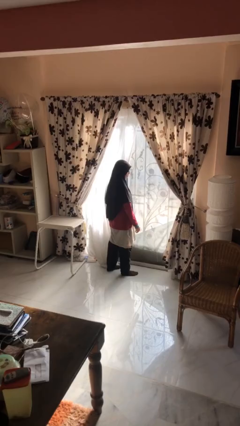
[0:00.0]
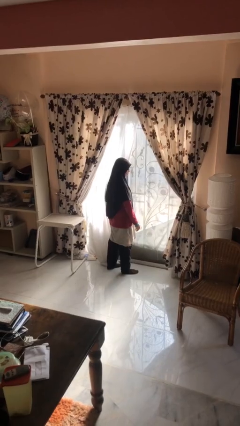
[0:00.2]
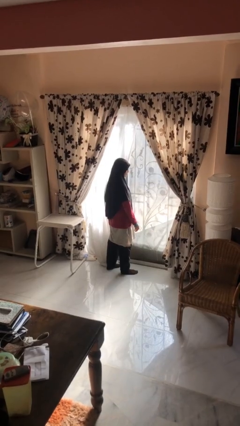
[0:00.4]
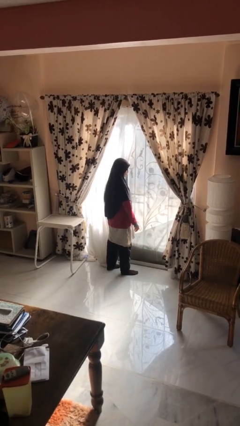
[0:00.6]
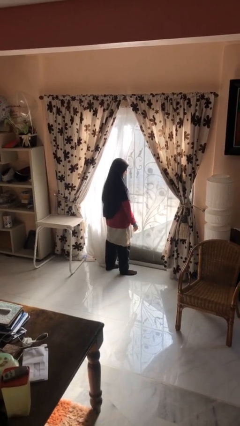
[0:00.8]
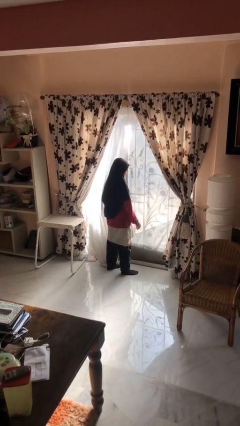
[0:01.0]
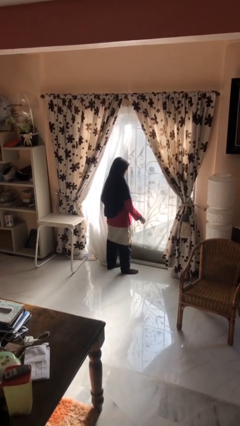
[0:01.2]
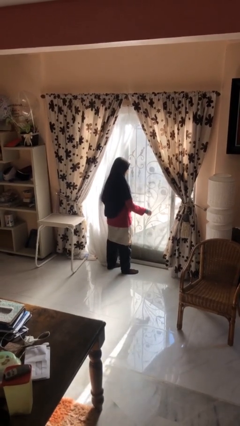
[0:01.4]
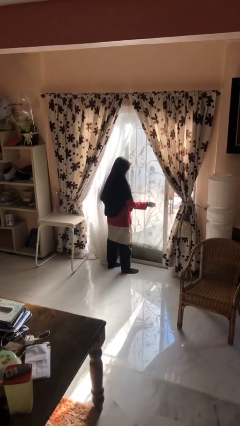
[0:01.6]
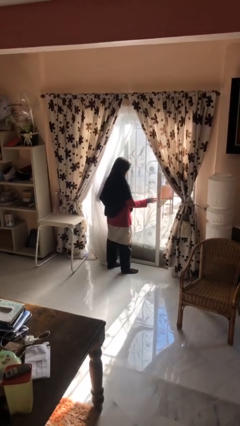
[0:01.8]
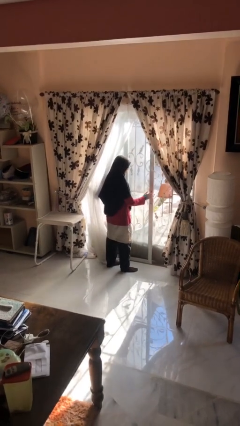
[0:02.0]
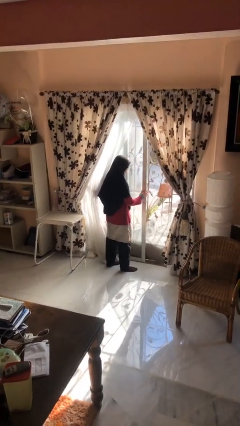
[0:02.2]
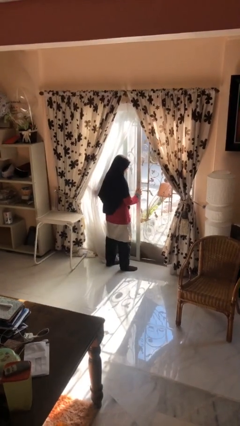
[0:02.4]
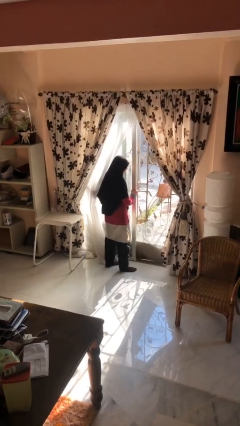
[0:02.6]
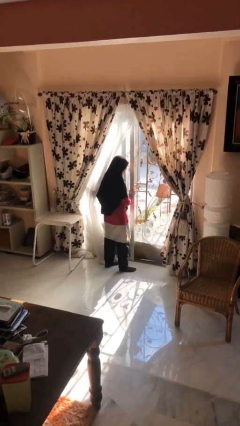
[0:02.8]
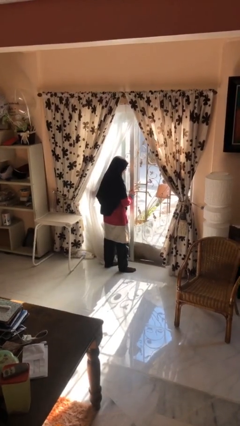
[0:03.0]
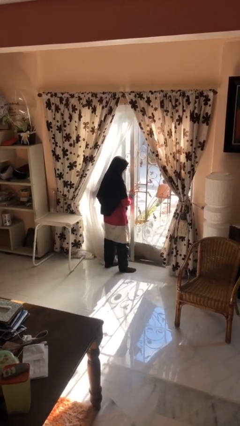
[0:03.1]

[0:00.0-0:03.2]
person opens sliding door

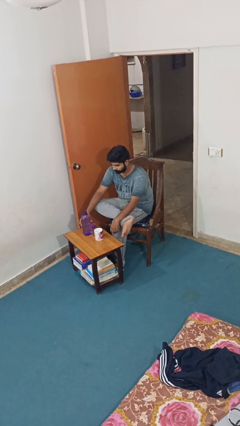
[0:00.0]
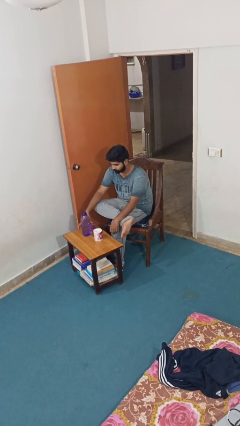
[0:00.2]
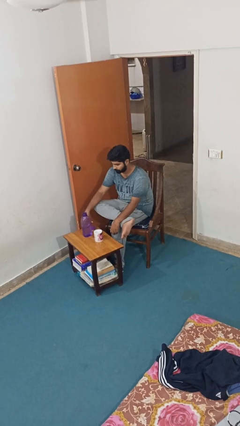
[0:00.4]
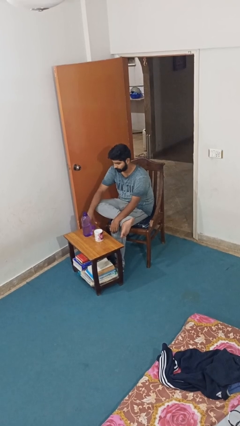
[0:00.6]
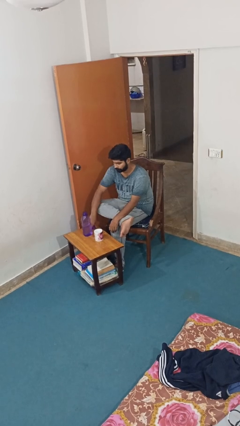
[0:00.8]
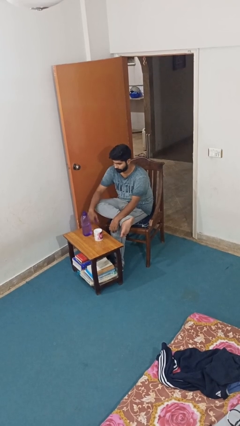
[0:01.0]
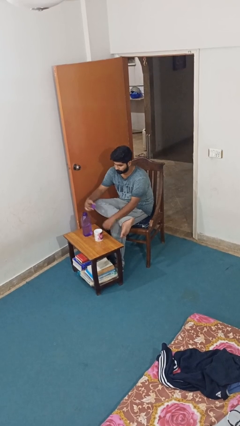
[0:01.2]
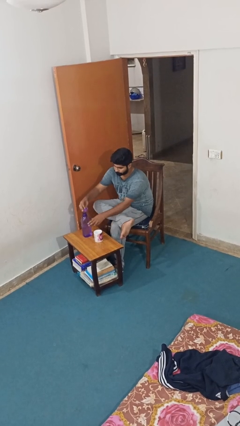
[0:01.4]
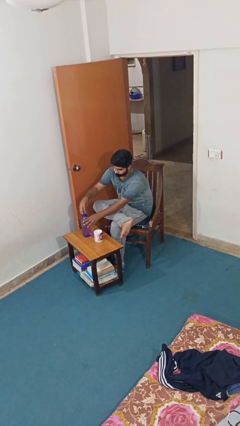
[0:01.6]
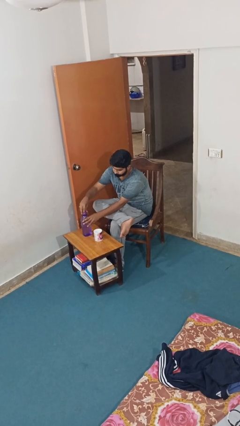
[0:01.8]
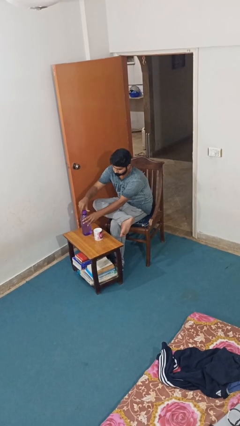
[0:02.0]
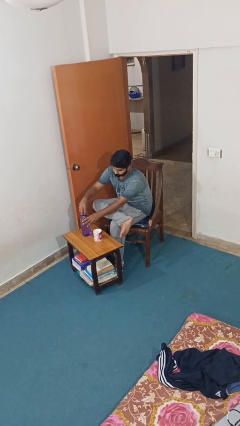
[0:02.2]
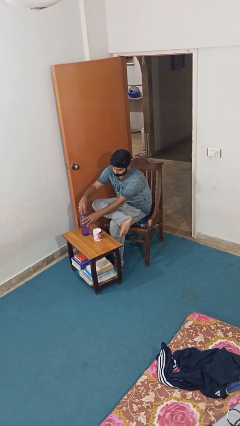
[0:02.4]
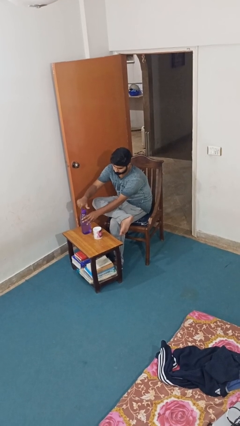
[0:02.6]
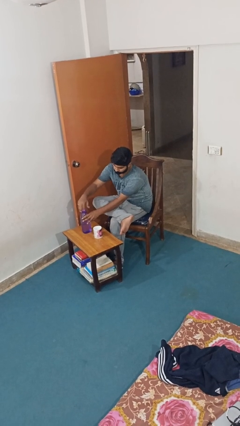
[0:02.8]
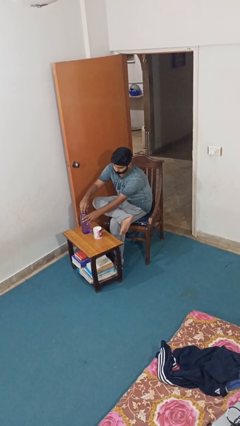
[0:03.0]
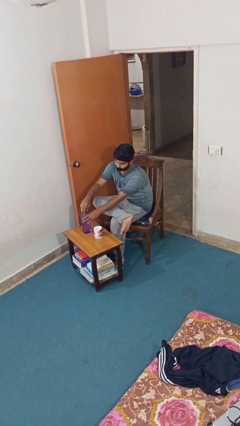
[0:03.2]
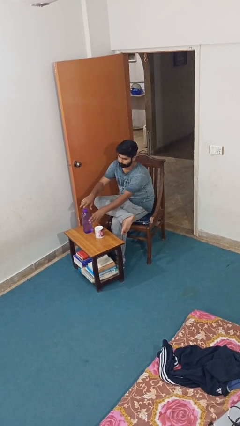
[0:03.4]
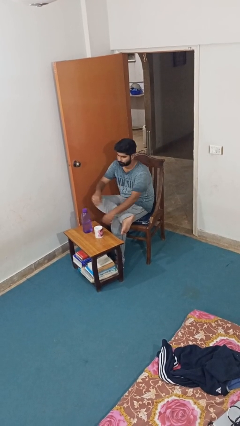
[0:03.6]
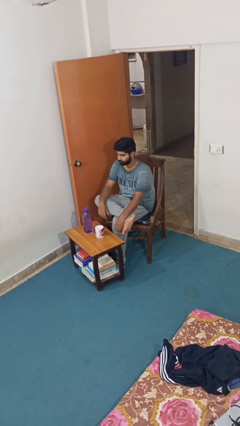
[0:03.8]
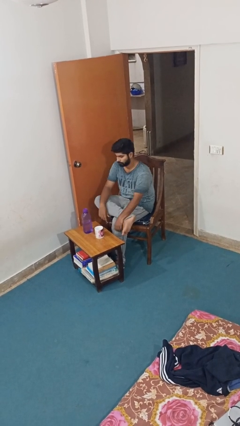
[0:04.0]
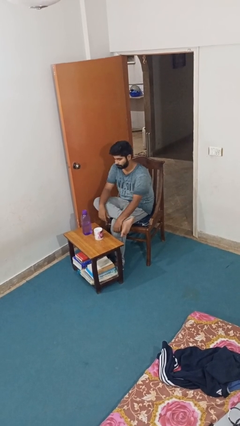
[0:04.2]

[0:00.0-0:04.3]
person screws lid to bottle

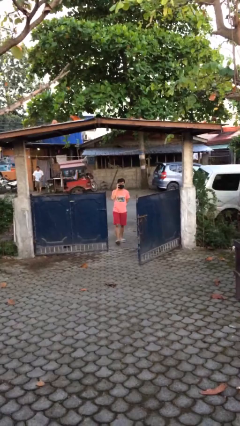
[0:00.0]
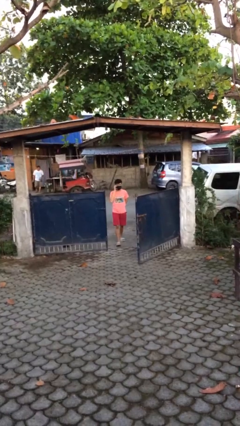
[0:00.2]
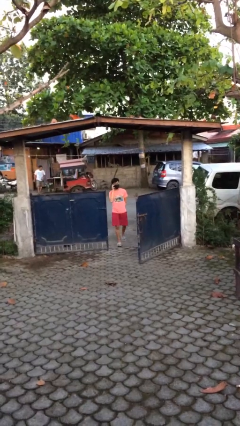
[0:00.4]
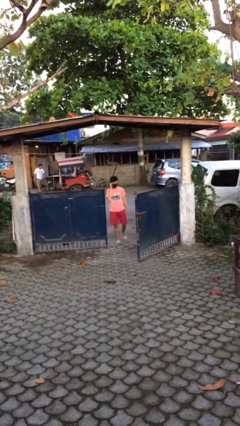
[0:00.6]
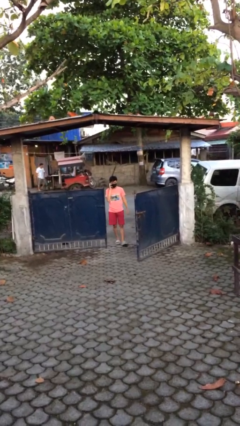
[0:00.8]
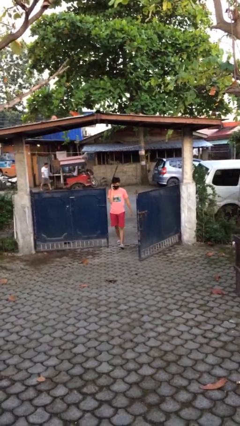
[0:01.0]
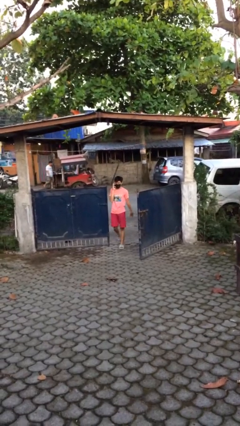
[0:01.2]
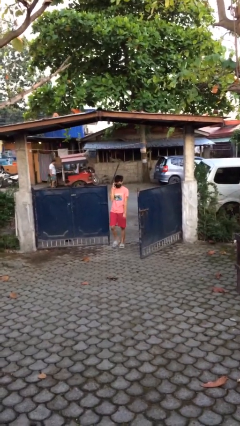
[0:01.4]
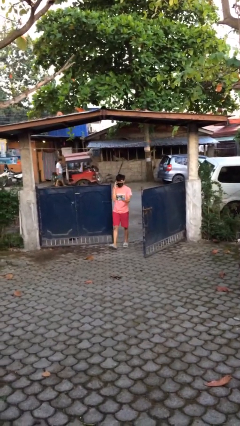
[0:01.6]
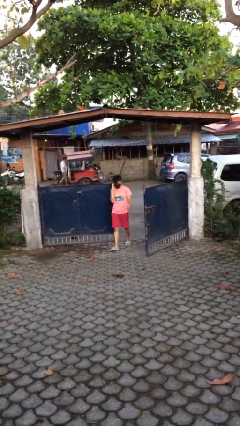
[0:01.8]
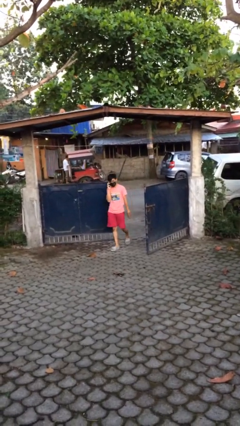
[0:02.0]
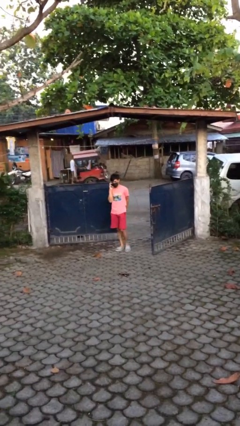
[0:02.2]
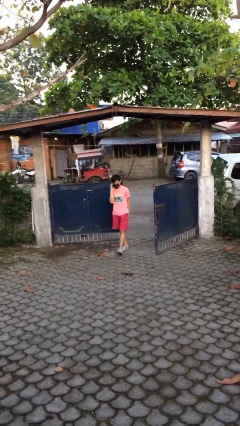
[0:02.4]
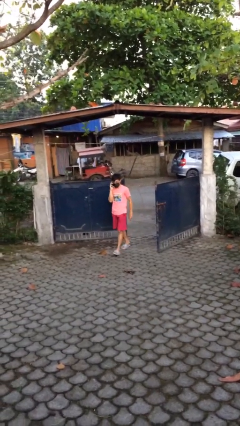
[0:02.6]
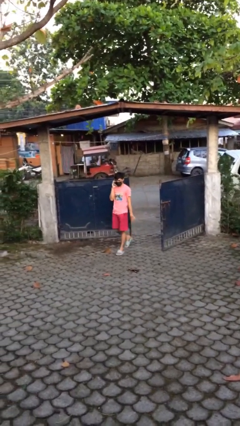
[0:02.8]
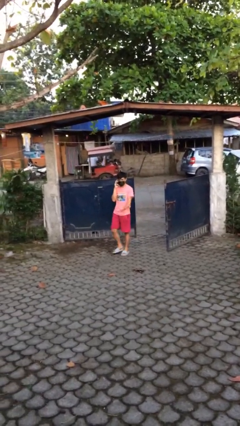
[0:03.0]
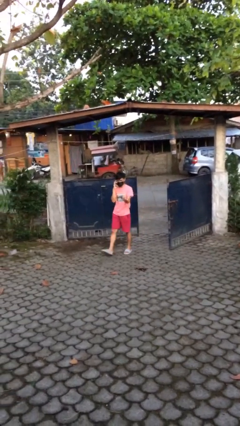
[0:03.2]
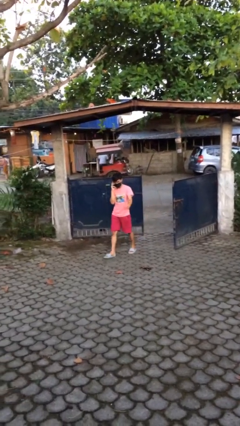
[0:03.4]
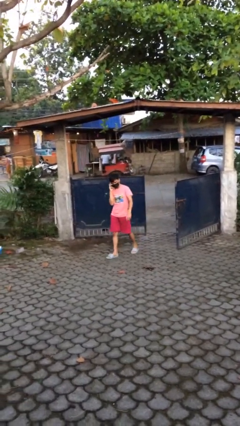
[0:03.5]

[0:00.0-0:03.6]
person enters scene through structure

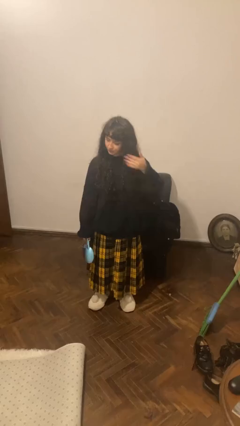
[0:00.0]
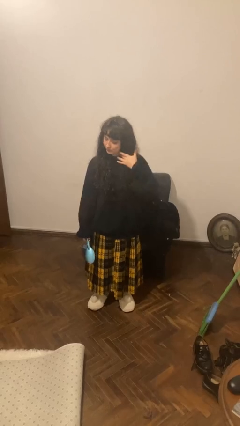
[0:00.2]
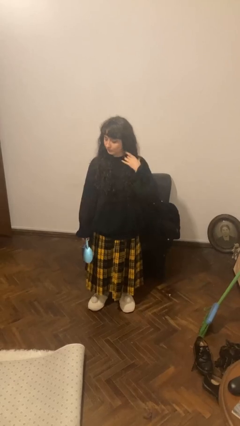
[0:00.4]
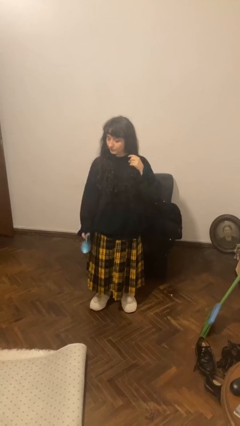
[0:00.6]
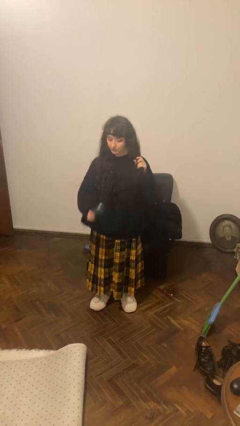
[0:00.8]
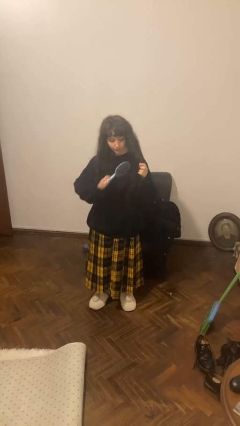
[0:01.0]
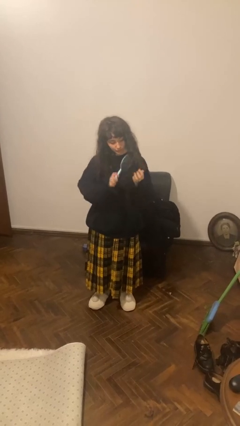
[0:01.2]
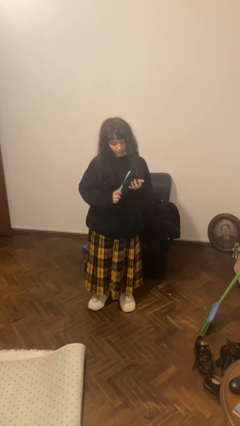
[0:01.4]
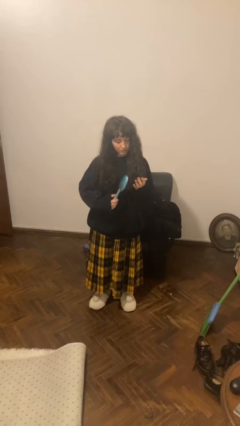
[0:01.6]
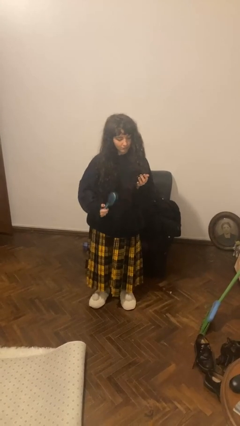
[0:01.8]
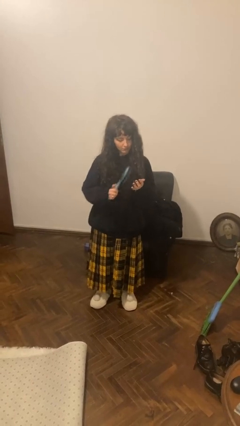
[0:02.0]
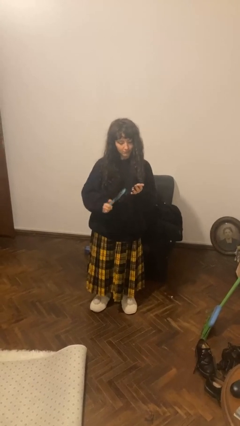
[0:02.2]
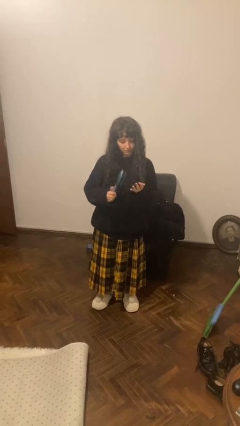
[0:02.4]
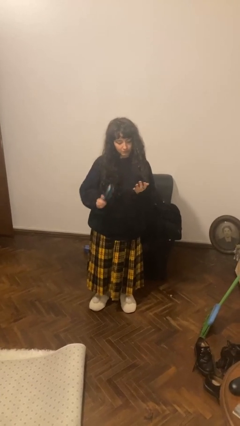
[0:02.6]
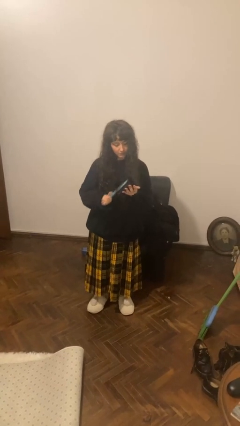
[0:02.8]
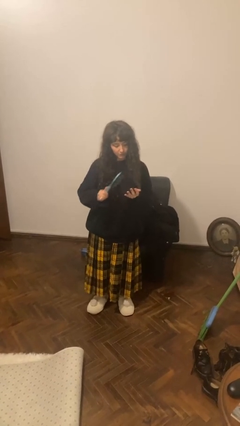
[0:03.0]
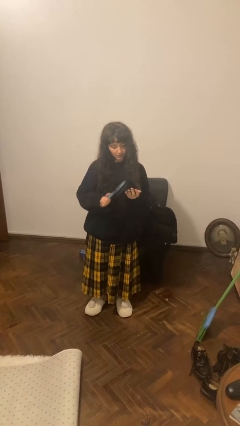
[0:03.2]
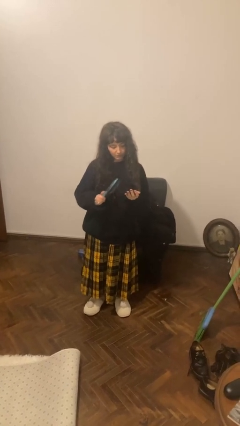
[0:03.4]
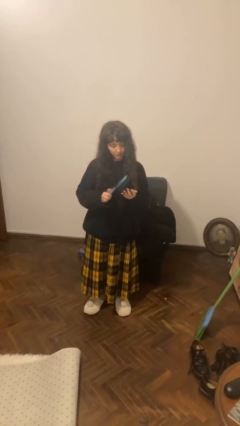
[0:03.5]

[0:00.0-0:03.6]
person brushes hair

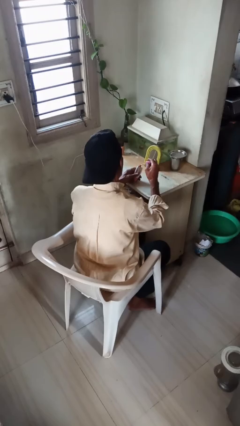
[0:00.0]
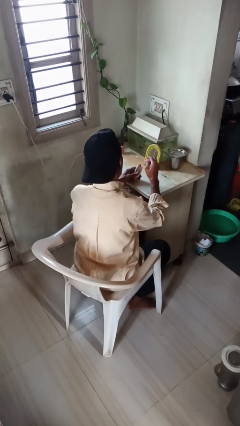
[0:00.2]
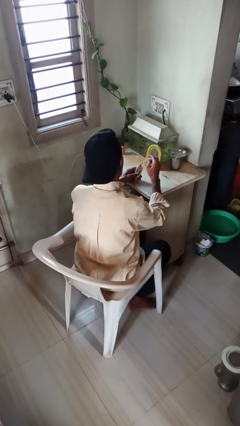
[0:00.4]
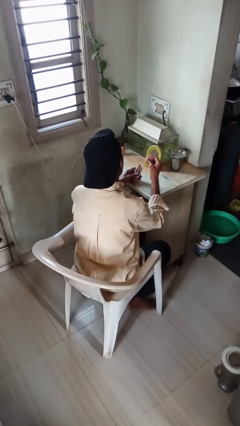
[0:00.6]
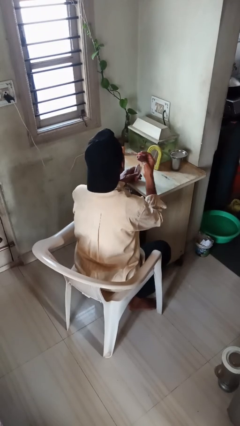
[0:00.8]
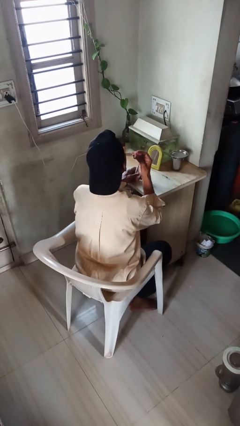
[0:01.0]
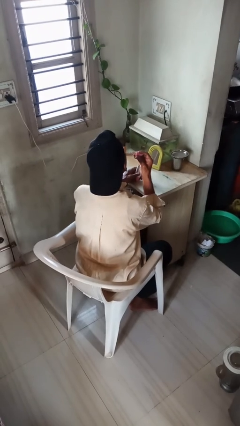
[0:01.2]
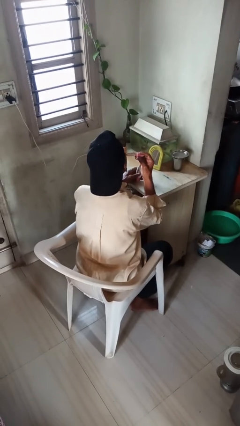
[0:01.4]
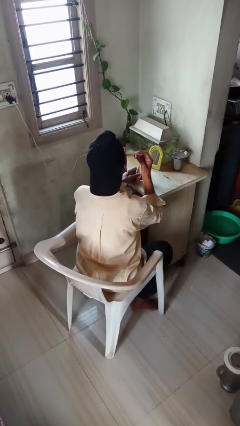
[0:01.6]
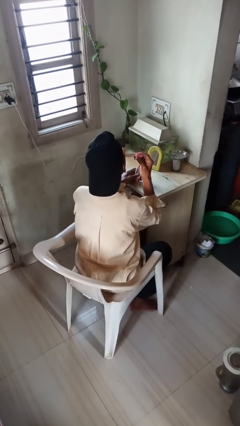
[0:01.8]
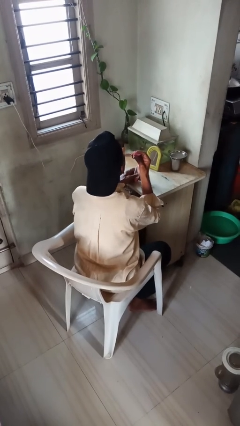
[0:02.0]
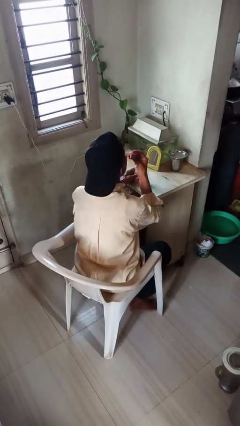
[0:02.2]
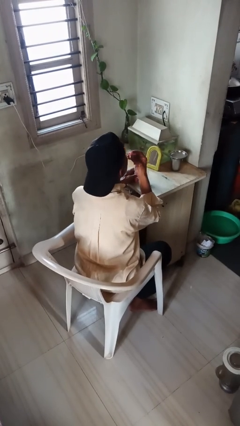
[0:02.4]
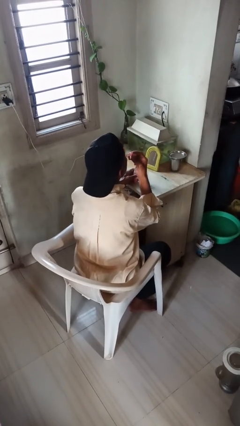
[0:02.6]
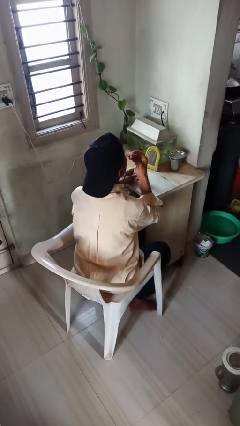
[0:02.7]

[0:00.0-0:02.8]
person applies lip makeup

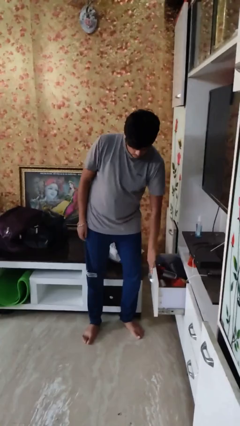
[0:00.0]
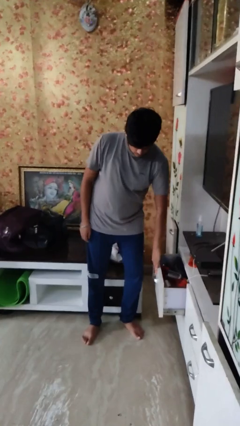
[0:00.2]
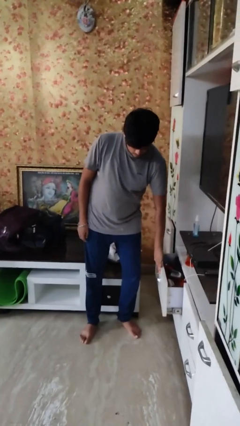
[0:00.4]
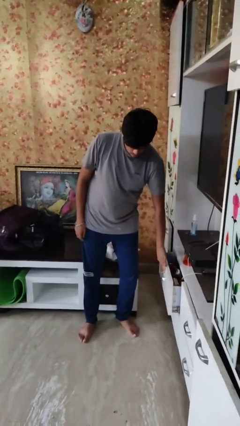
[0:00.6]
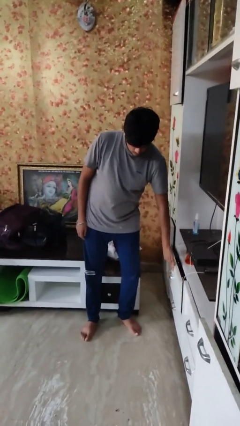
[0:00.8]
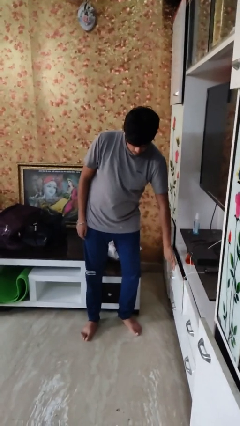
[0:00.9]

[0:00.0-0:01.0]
person closes kitchen drawer
